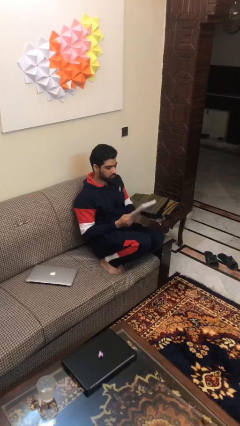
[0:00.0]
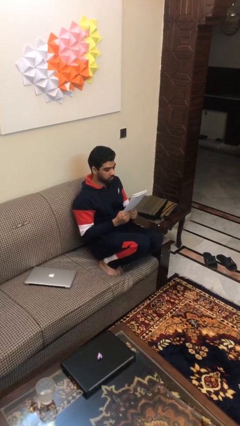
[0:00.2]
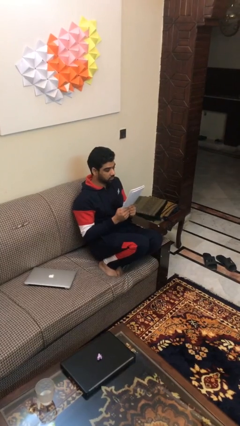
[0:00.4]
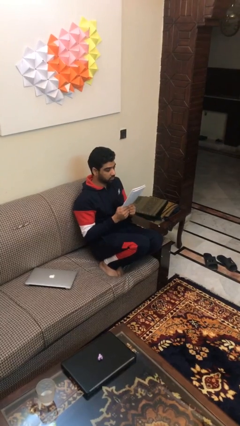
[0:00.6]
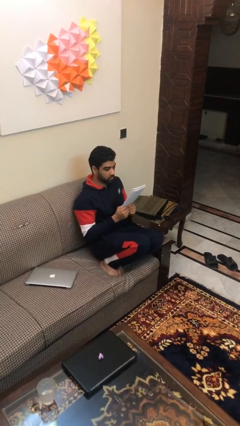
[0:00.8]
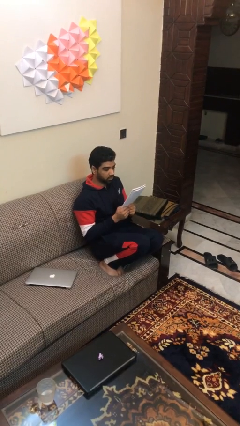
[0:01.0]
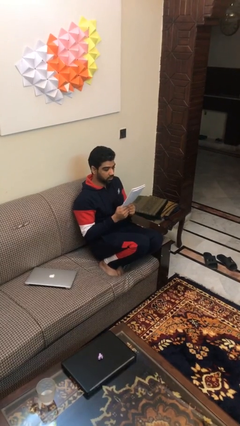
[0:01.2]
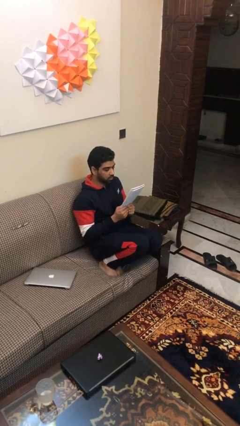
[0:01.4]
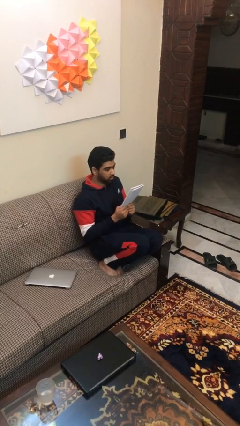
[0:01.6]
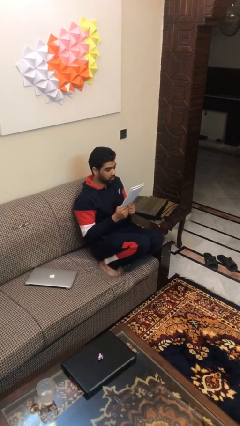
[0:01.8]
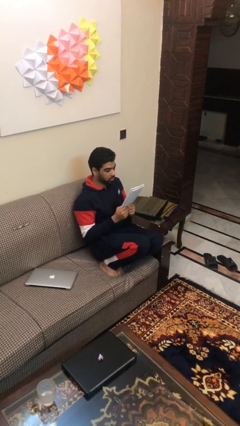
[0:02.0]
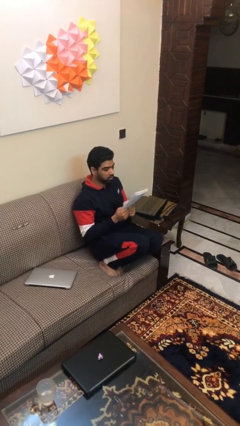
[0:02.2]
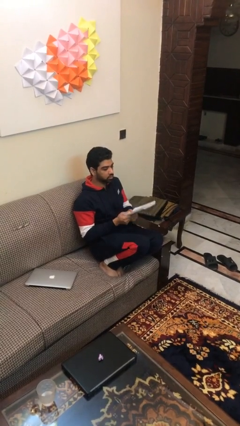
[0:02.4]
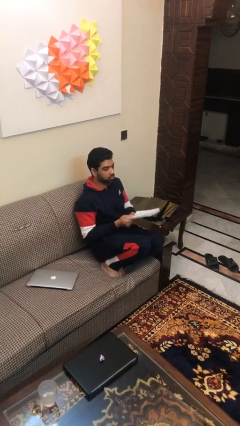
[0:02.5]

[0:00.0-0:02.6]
person reads document

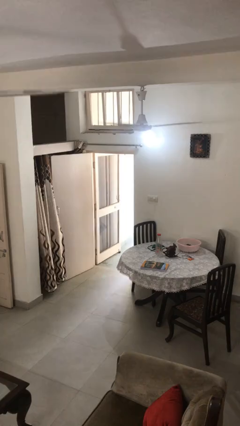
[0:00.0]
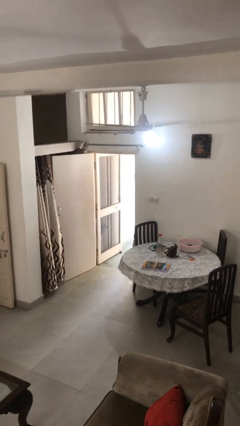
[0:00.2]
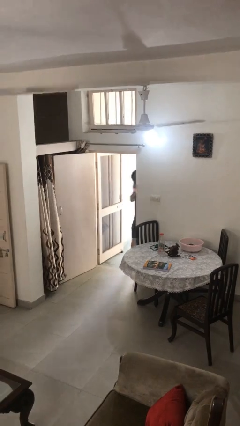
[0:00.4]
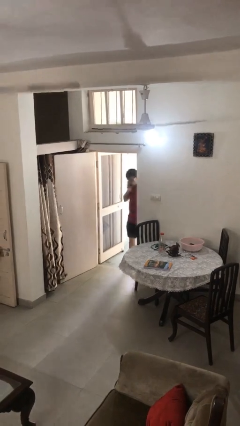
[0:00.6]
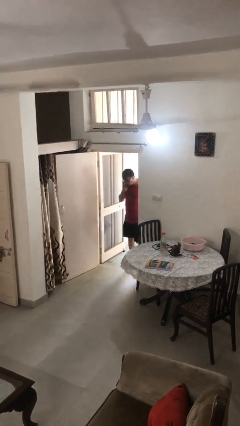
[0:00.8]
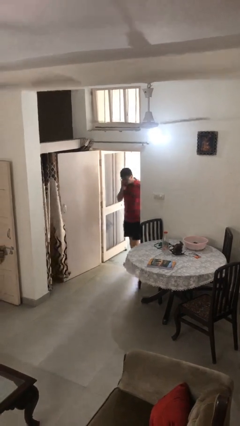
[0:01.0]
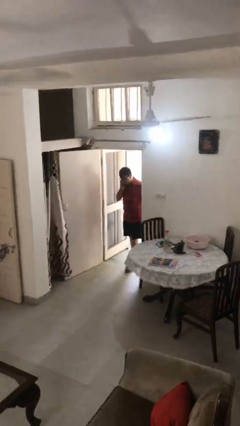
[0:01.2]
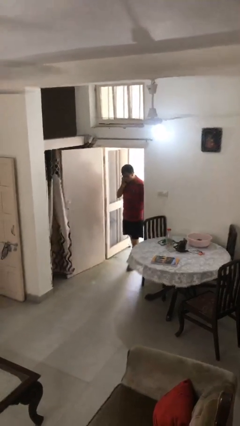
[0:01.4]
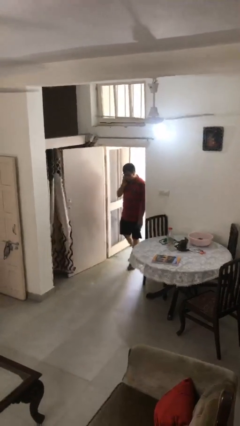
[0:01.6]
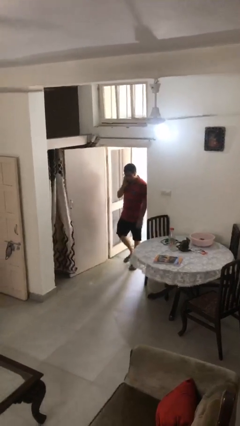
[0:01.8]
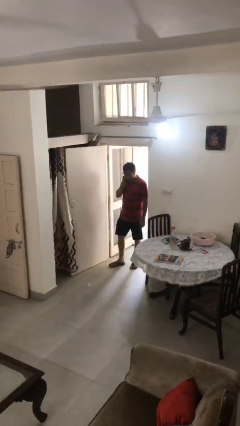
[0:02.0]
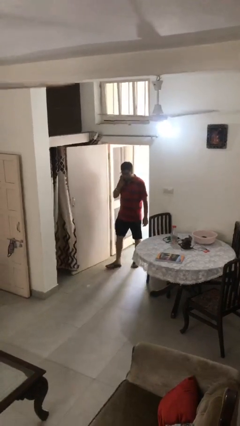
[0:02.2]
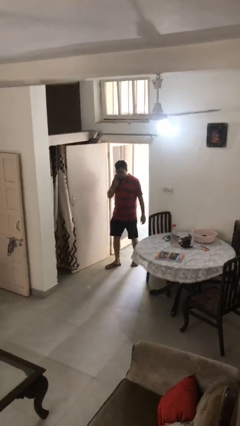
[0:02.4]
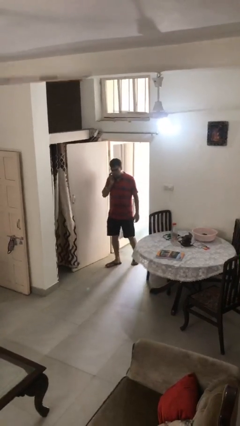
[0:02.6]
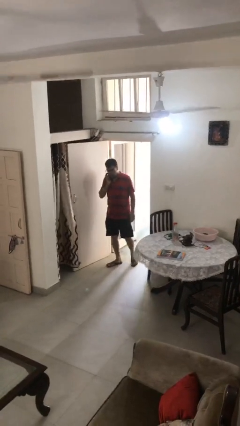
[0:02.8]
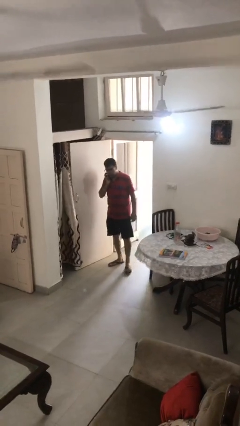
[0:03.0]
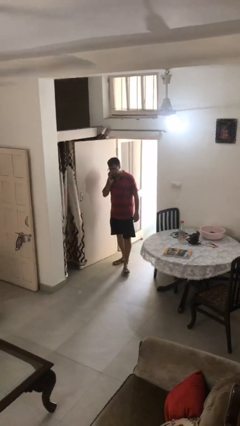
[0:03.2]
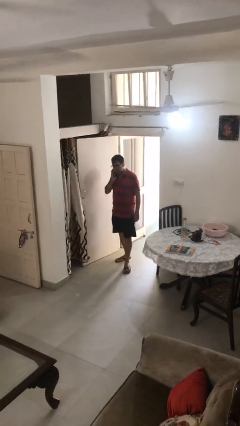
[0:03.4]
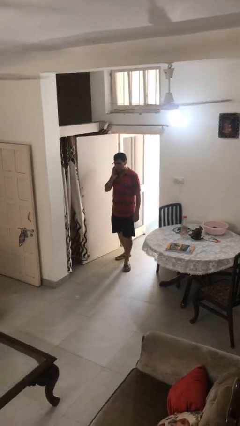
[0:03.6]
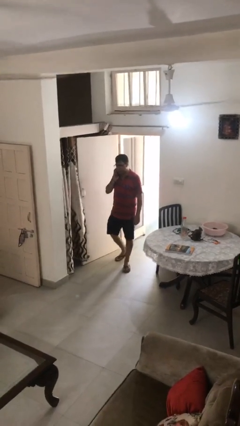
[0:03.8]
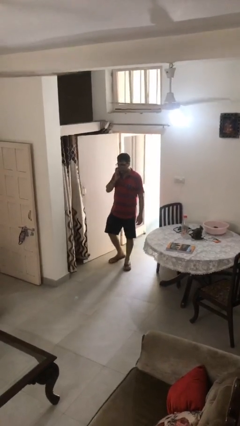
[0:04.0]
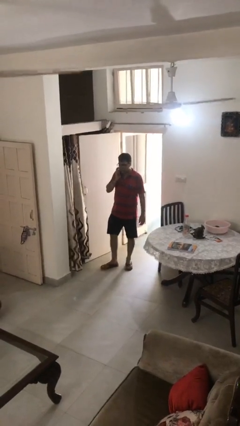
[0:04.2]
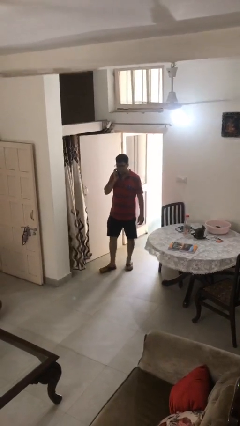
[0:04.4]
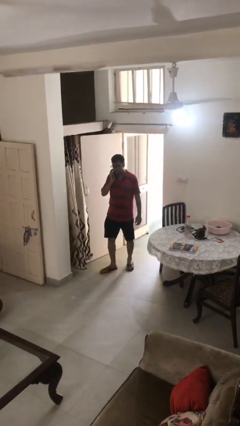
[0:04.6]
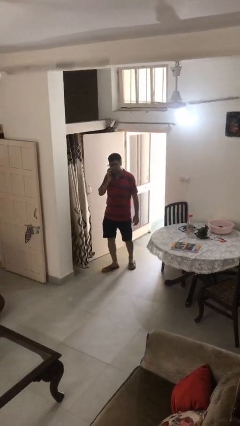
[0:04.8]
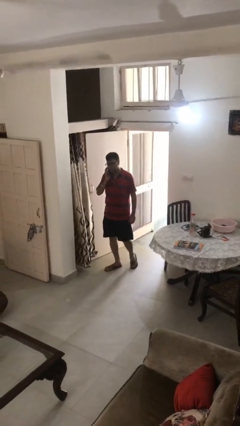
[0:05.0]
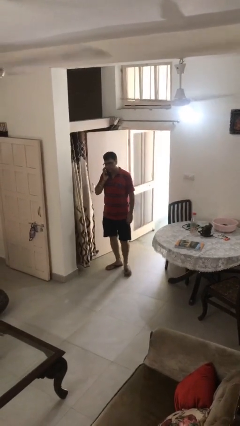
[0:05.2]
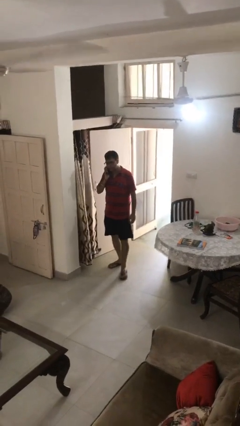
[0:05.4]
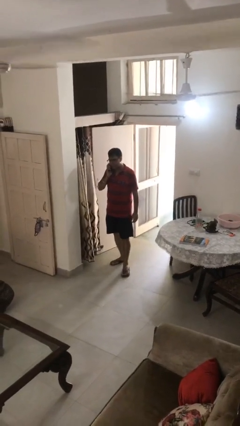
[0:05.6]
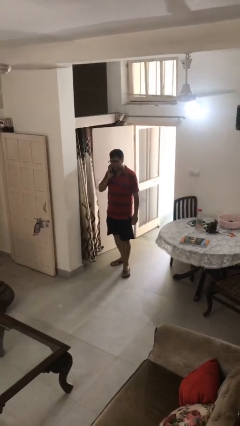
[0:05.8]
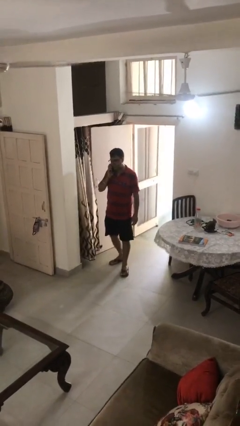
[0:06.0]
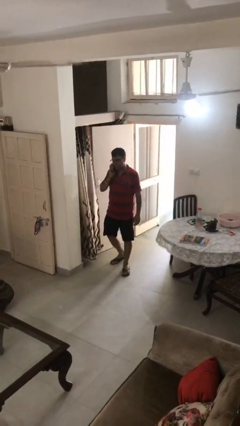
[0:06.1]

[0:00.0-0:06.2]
person enters scene through structure

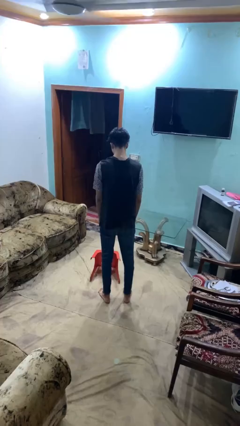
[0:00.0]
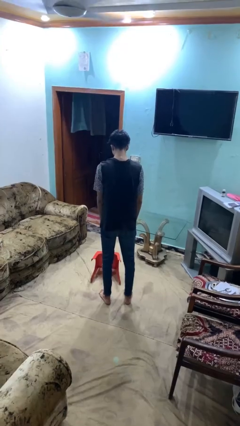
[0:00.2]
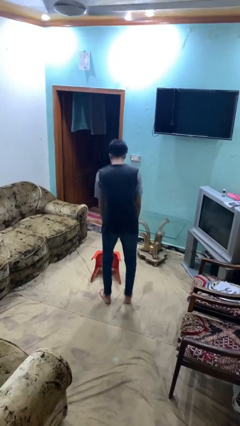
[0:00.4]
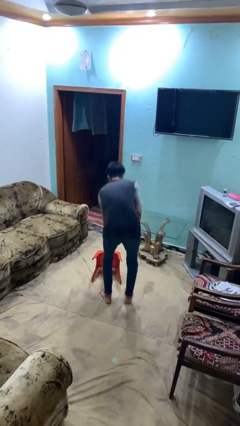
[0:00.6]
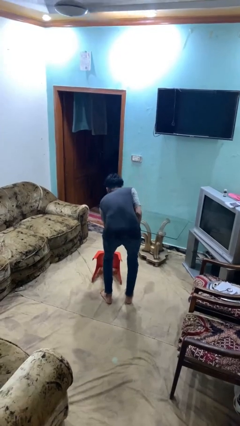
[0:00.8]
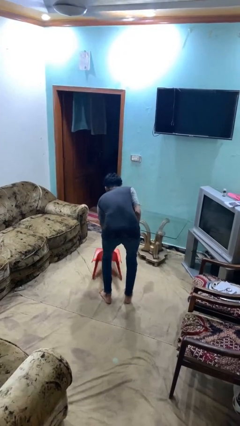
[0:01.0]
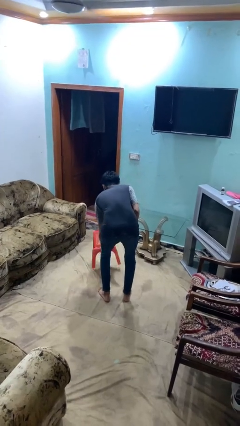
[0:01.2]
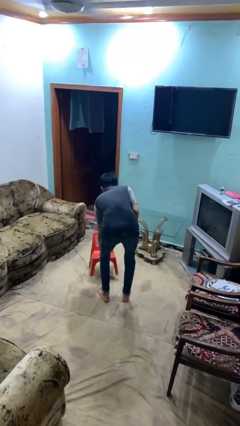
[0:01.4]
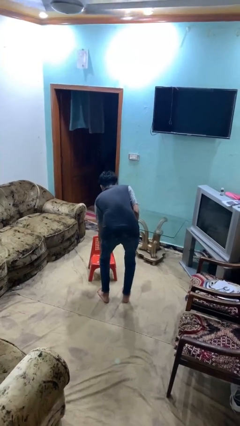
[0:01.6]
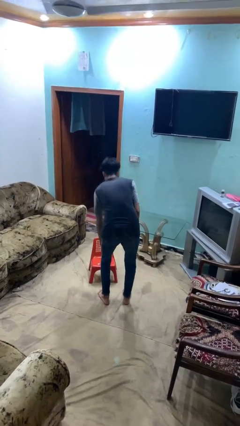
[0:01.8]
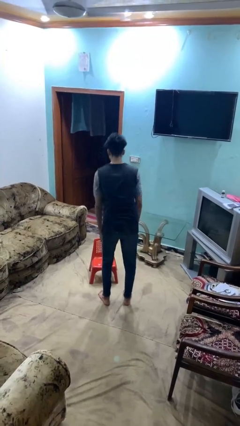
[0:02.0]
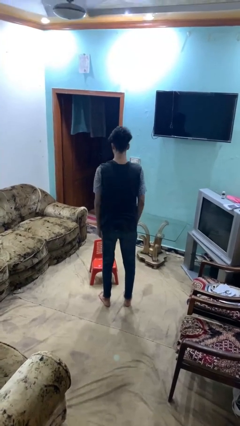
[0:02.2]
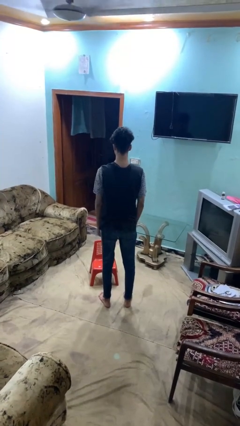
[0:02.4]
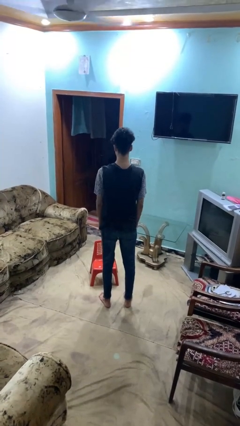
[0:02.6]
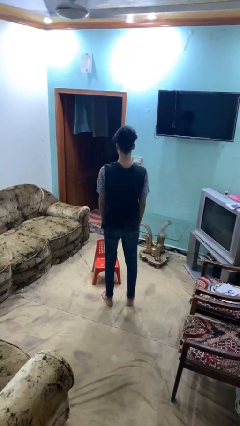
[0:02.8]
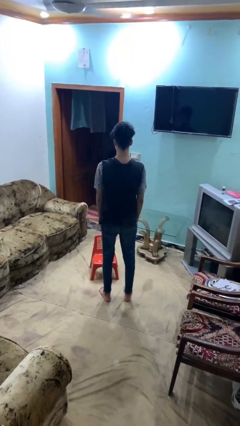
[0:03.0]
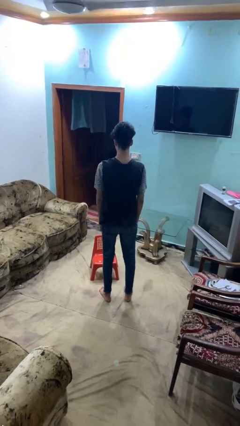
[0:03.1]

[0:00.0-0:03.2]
person sets upright furniture

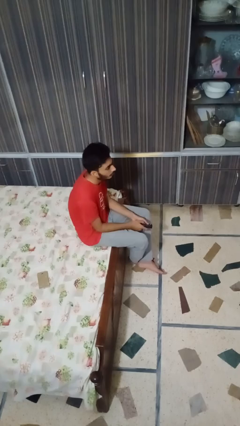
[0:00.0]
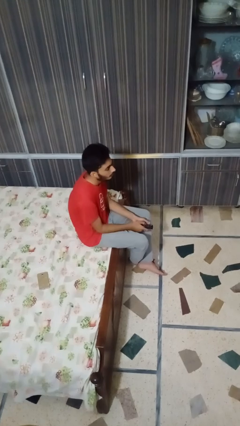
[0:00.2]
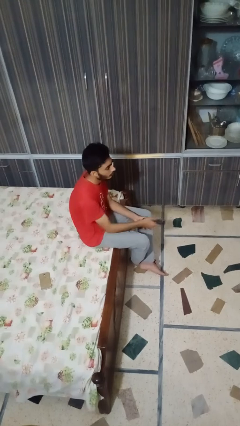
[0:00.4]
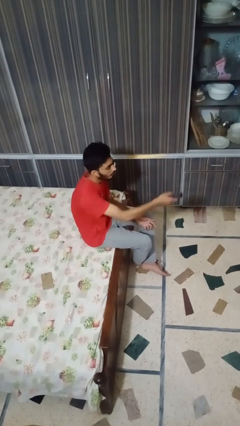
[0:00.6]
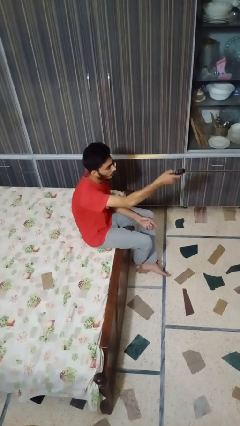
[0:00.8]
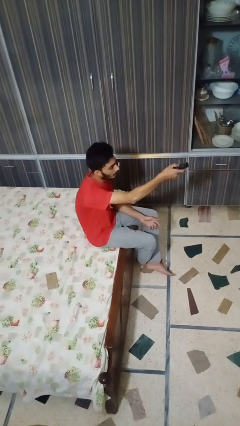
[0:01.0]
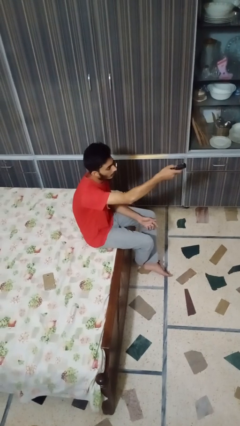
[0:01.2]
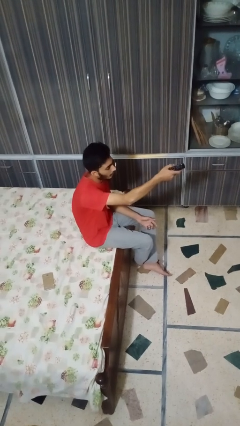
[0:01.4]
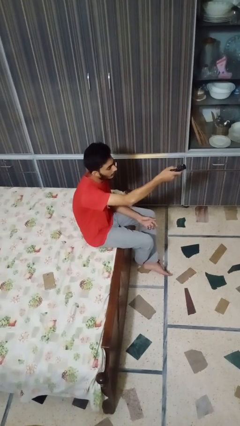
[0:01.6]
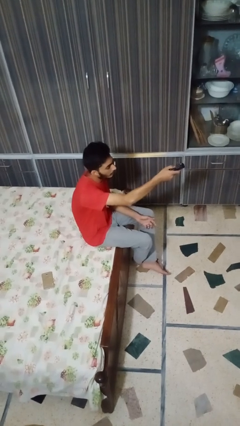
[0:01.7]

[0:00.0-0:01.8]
person uses television remote

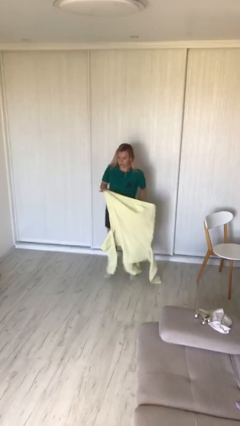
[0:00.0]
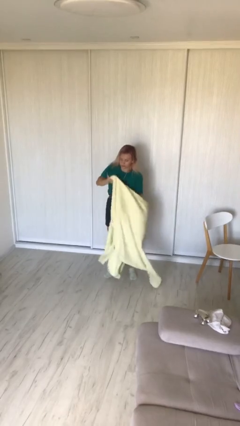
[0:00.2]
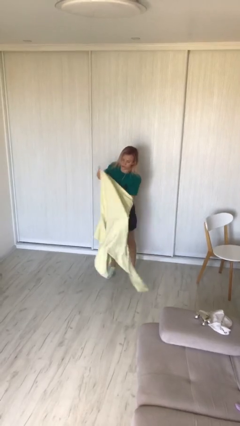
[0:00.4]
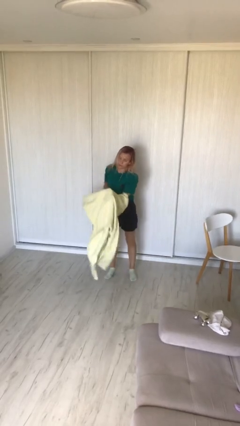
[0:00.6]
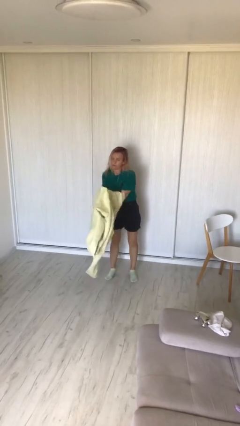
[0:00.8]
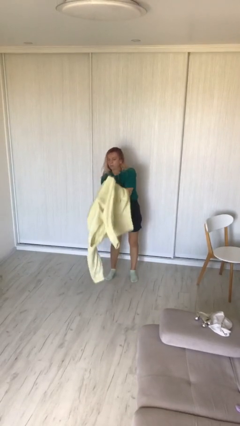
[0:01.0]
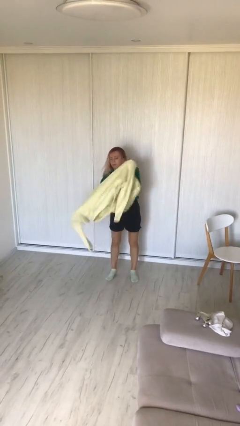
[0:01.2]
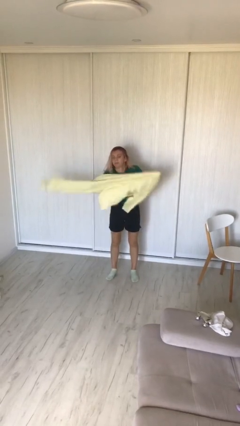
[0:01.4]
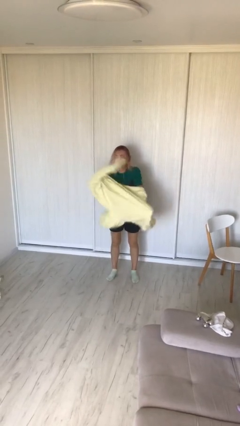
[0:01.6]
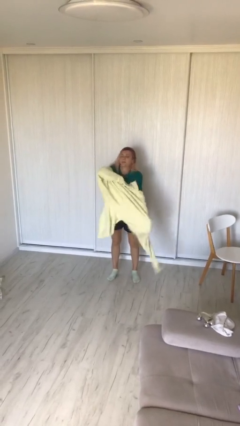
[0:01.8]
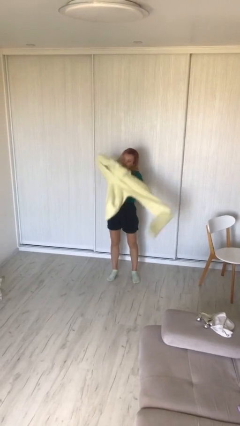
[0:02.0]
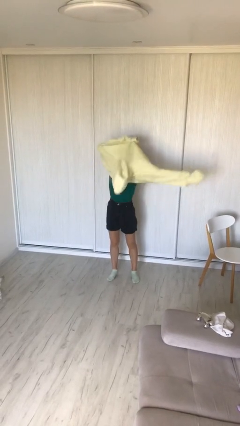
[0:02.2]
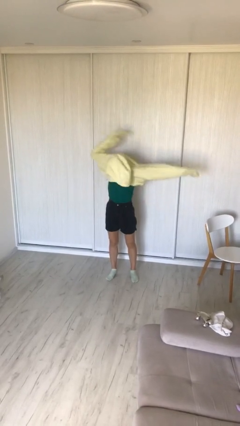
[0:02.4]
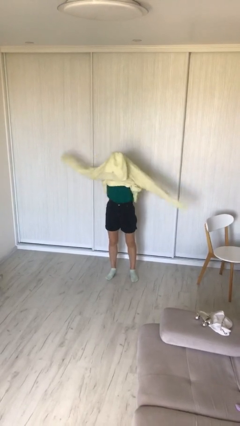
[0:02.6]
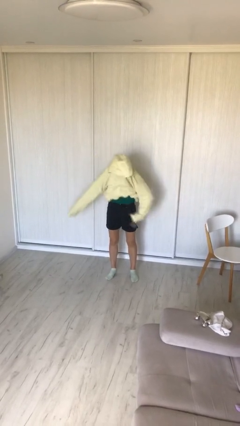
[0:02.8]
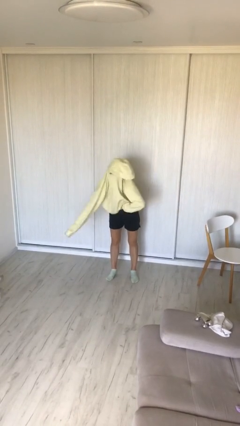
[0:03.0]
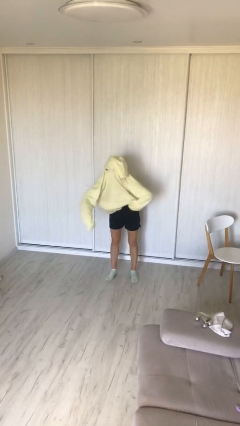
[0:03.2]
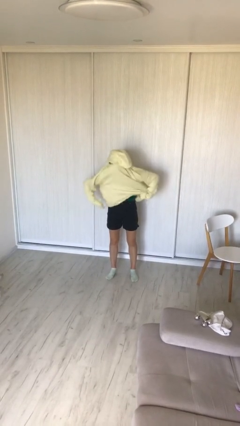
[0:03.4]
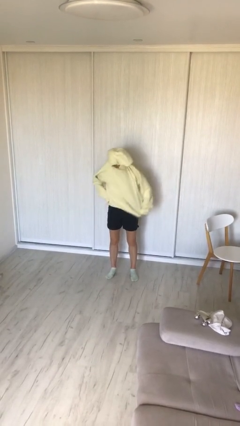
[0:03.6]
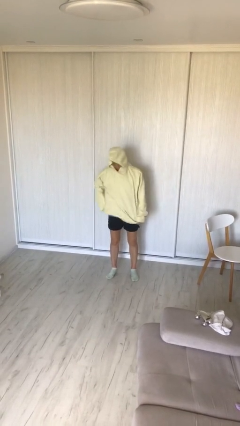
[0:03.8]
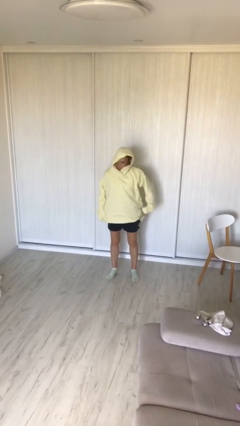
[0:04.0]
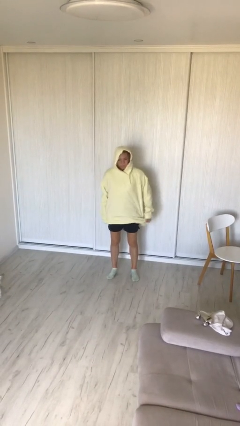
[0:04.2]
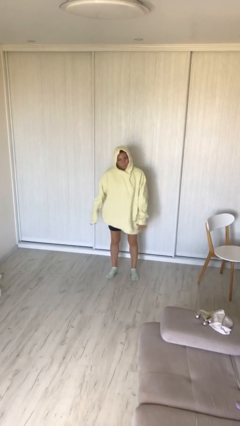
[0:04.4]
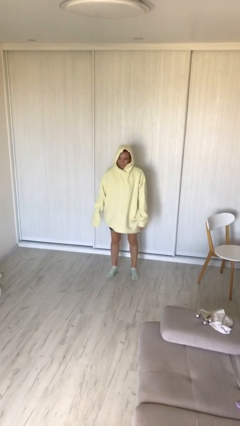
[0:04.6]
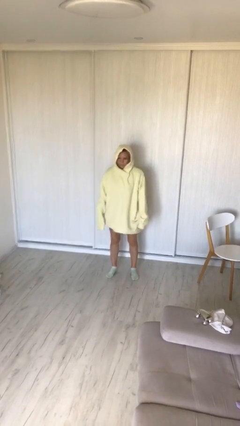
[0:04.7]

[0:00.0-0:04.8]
person puts on hoodie
